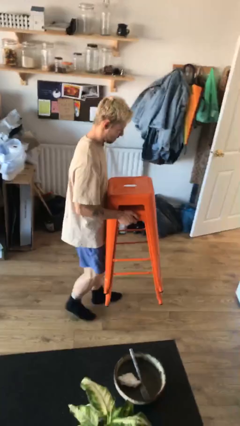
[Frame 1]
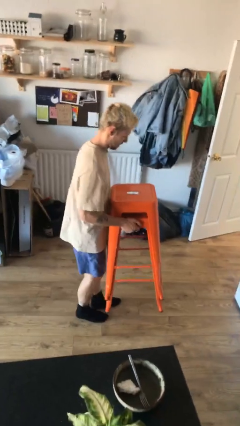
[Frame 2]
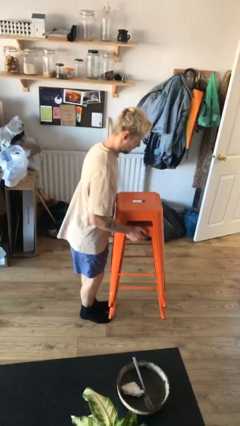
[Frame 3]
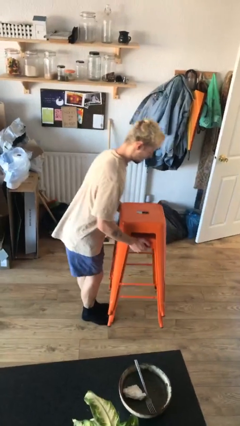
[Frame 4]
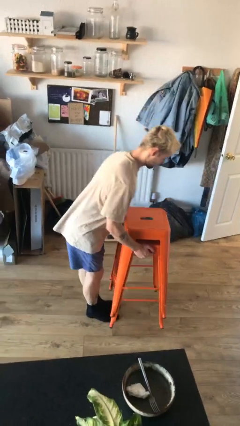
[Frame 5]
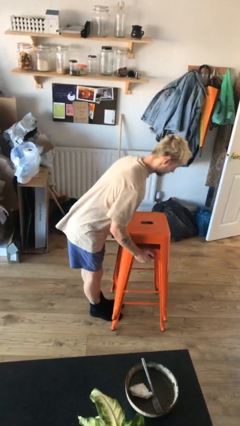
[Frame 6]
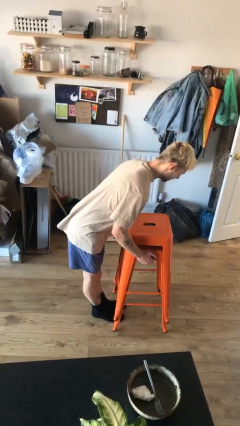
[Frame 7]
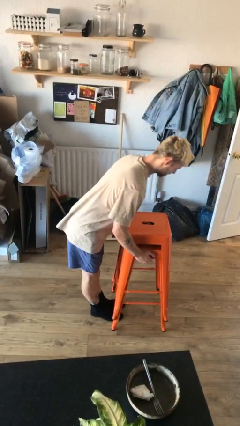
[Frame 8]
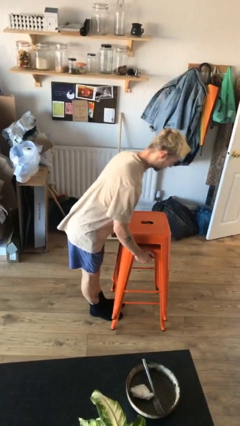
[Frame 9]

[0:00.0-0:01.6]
person puts down object on floor

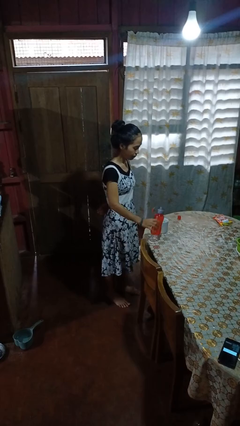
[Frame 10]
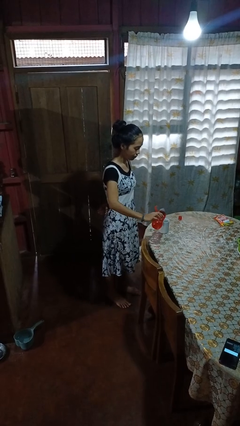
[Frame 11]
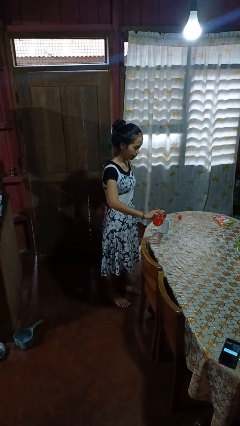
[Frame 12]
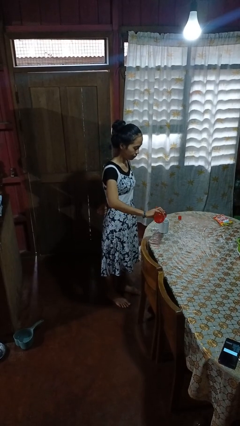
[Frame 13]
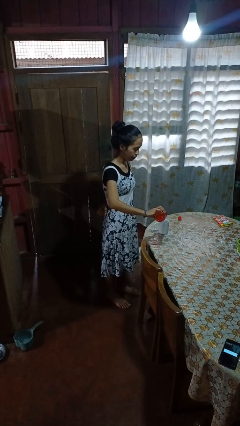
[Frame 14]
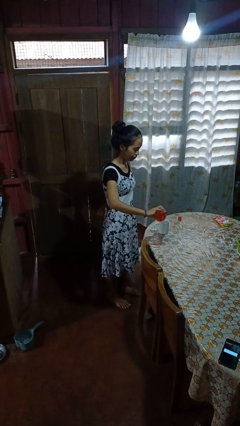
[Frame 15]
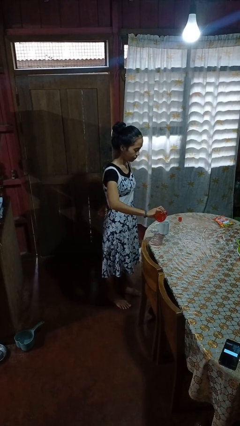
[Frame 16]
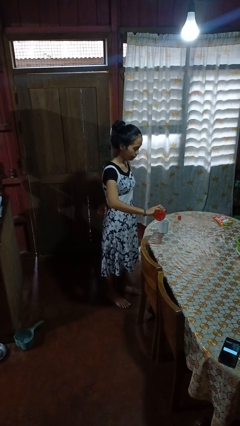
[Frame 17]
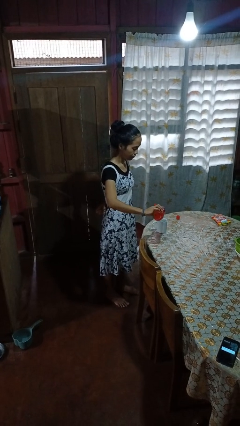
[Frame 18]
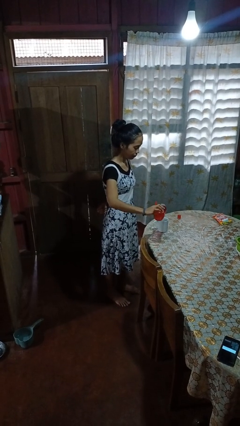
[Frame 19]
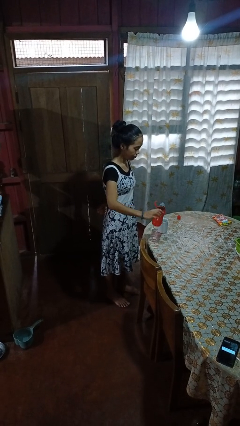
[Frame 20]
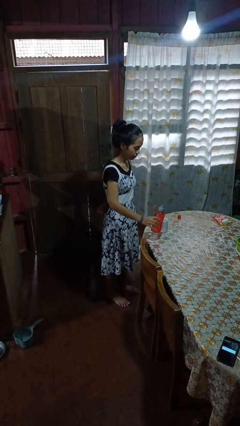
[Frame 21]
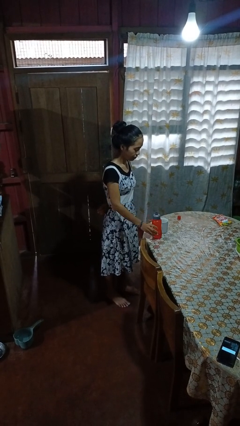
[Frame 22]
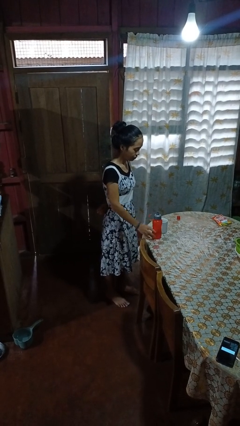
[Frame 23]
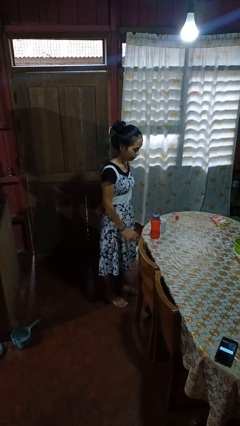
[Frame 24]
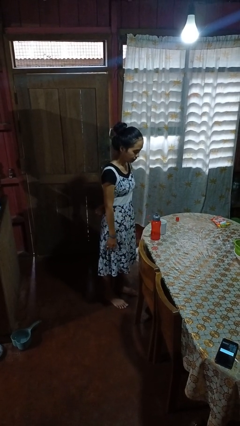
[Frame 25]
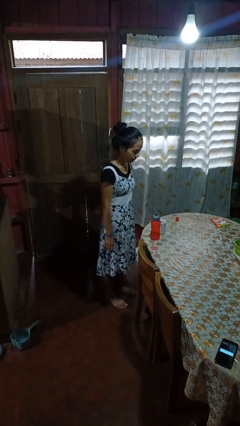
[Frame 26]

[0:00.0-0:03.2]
person pours liquid into cup

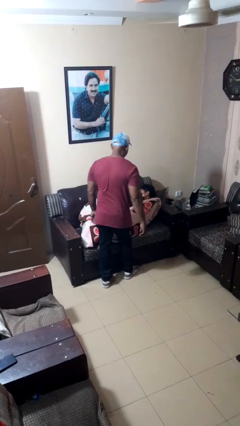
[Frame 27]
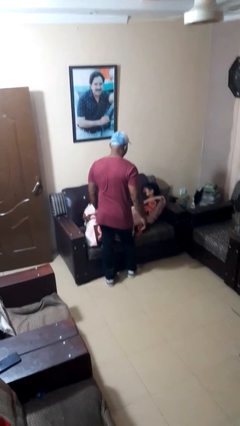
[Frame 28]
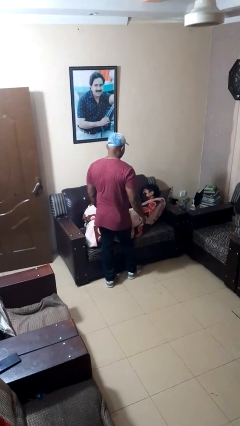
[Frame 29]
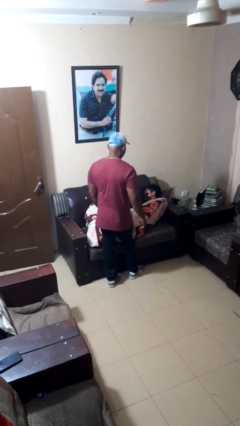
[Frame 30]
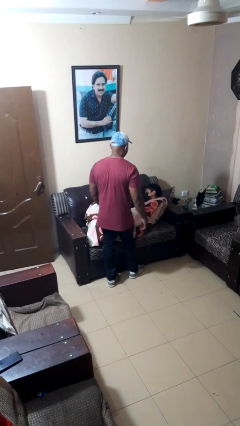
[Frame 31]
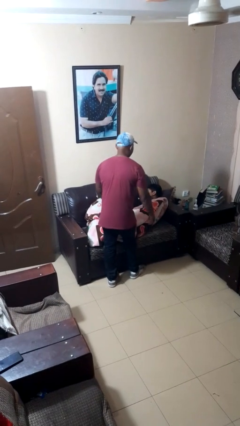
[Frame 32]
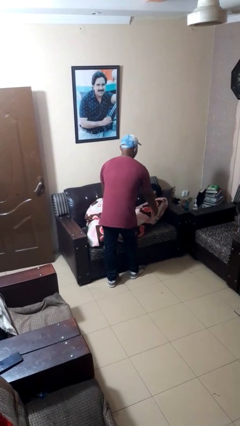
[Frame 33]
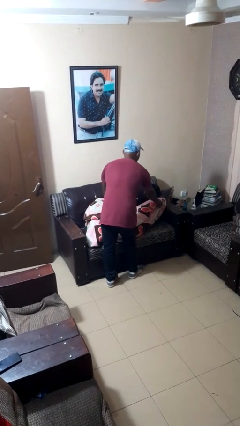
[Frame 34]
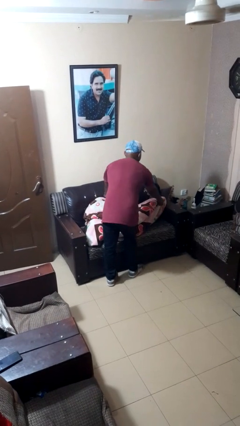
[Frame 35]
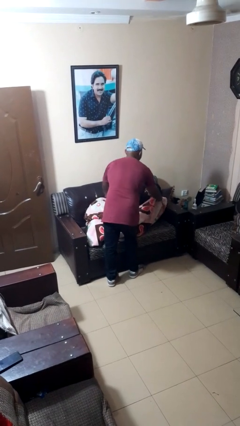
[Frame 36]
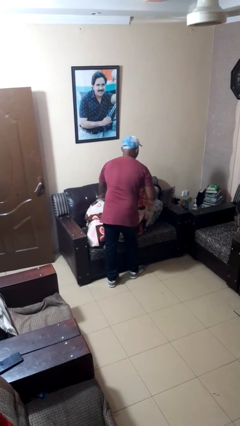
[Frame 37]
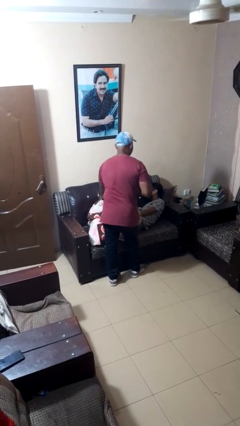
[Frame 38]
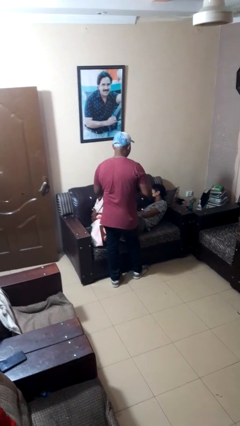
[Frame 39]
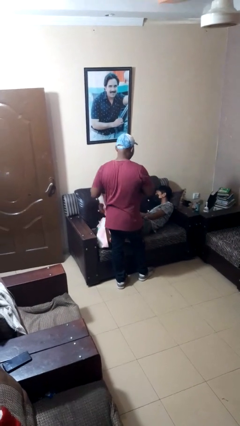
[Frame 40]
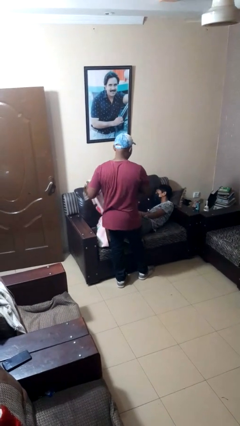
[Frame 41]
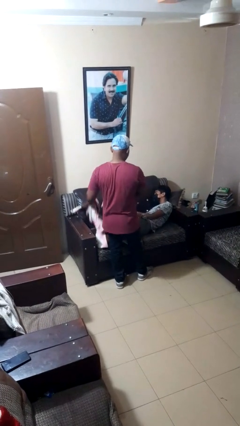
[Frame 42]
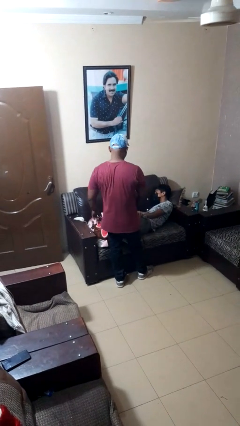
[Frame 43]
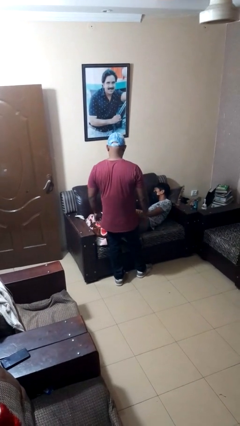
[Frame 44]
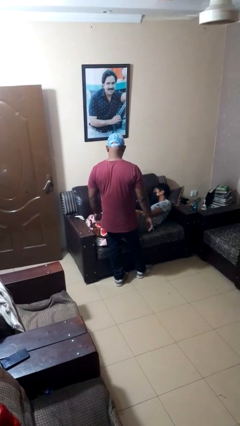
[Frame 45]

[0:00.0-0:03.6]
person uncovers friend with blanket

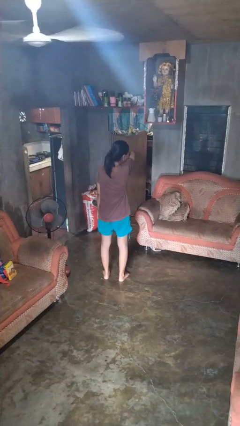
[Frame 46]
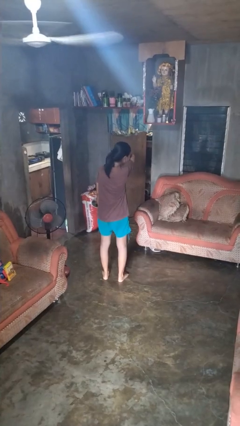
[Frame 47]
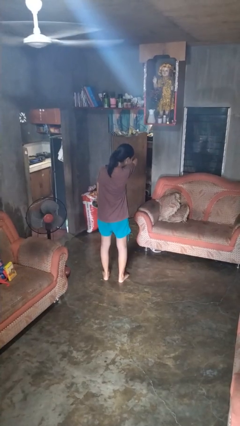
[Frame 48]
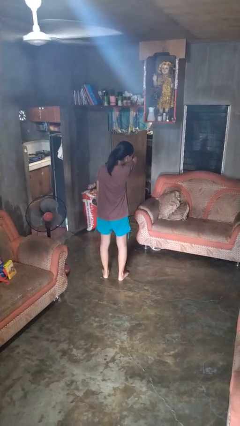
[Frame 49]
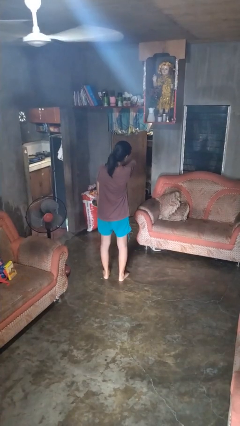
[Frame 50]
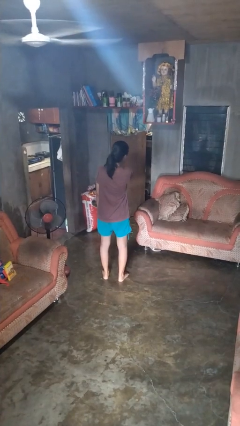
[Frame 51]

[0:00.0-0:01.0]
person sneezes into arm

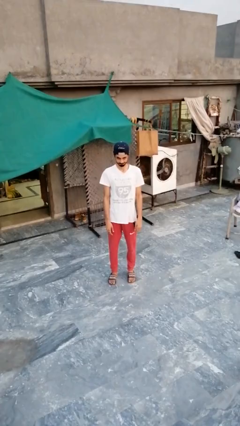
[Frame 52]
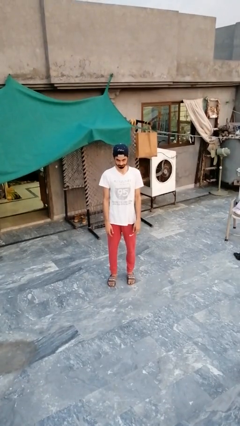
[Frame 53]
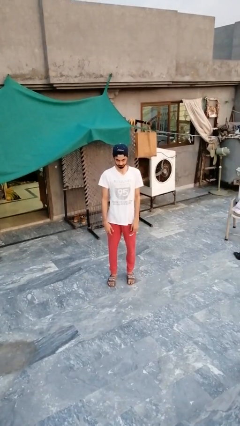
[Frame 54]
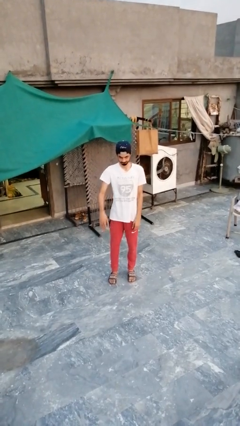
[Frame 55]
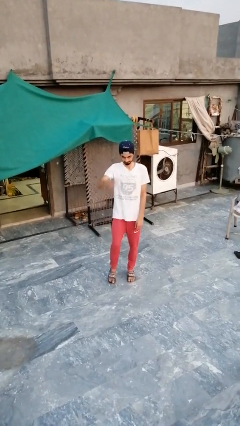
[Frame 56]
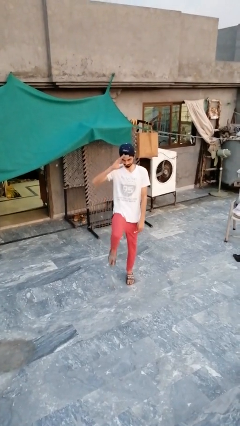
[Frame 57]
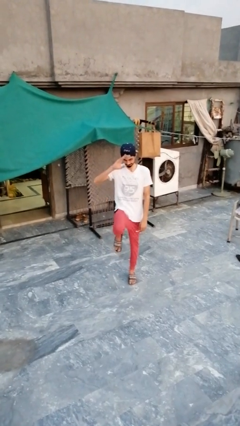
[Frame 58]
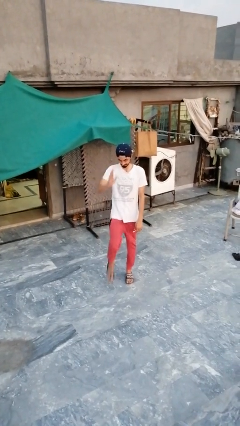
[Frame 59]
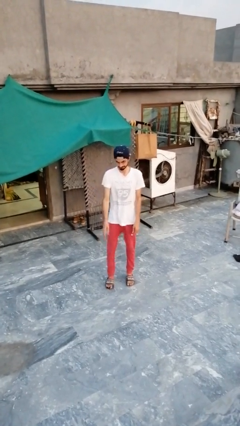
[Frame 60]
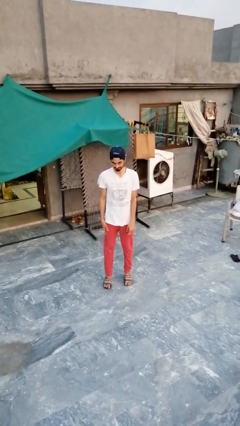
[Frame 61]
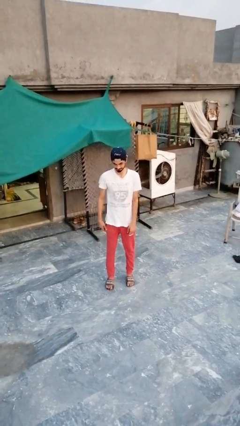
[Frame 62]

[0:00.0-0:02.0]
person salutes

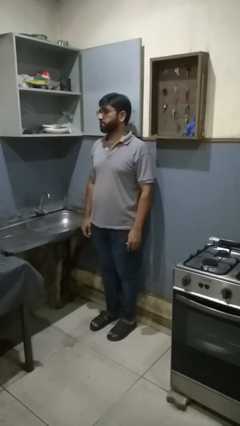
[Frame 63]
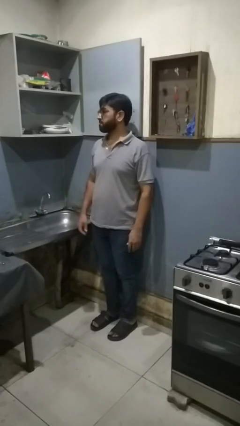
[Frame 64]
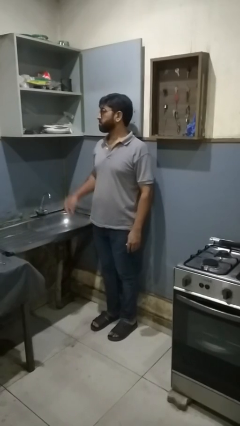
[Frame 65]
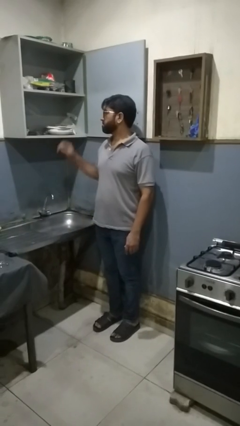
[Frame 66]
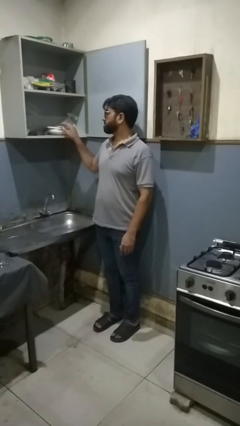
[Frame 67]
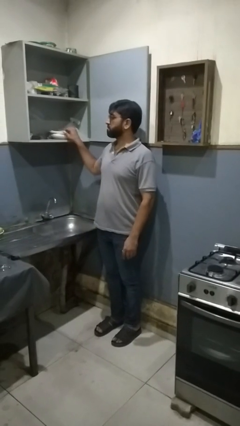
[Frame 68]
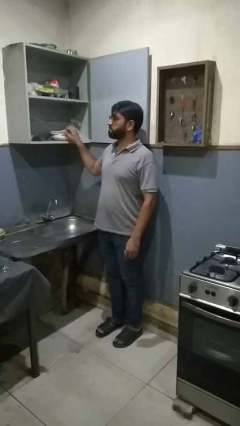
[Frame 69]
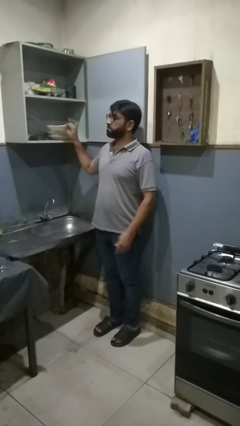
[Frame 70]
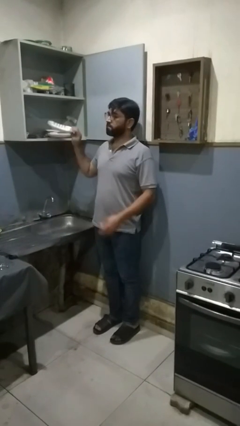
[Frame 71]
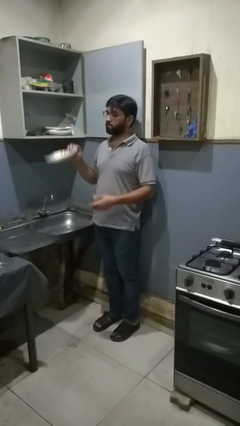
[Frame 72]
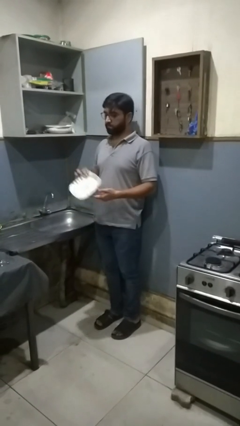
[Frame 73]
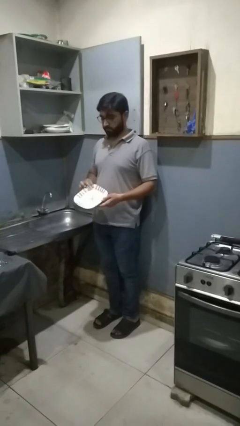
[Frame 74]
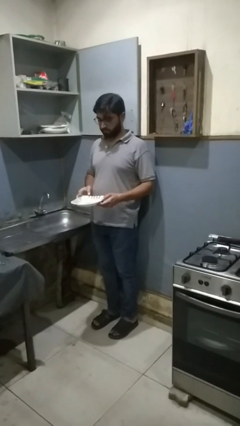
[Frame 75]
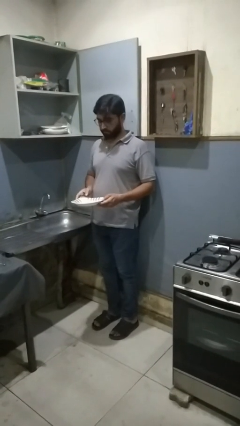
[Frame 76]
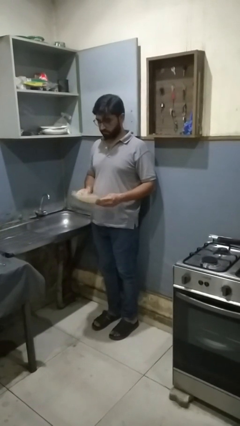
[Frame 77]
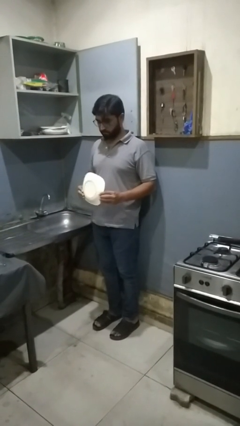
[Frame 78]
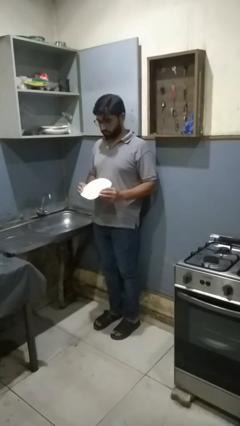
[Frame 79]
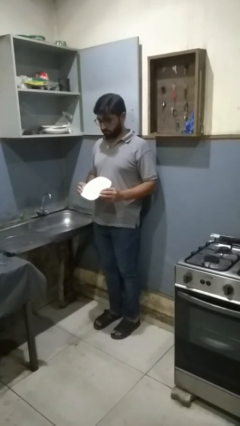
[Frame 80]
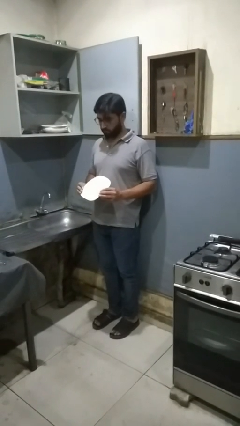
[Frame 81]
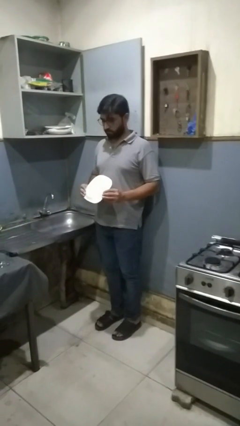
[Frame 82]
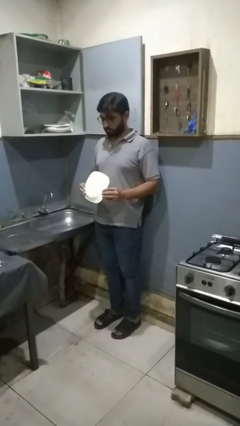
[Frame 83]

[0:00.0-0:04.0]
person takes object from kitchen drawer

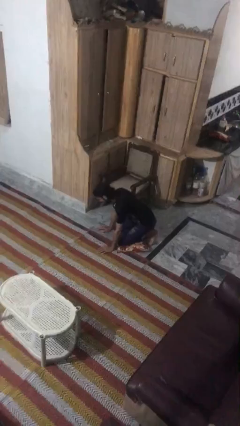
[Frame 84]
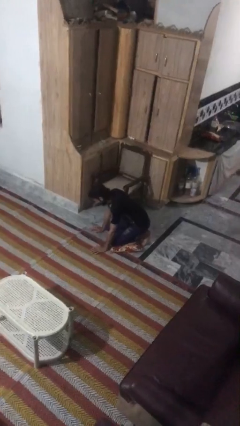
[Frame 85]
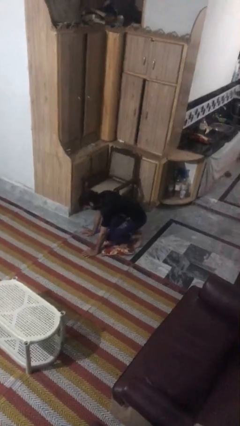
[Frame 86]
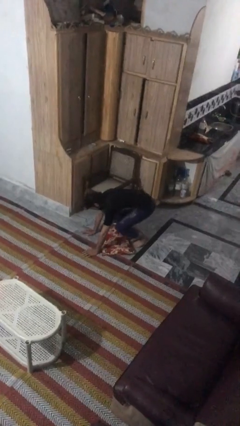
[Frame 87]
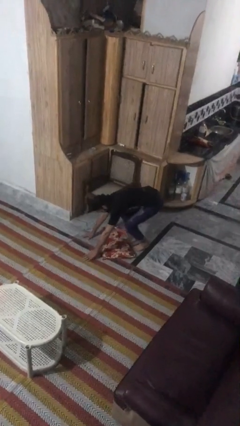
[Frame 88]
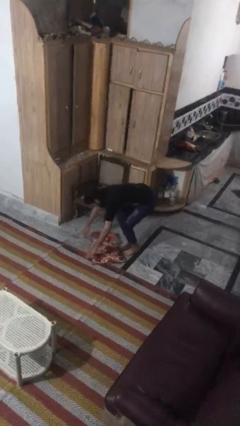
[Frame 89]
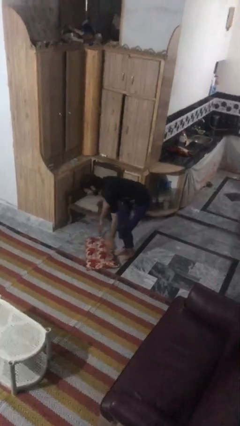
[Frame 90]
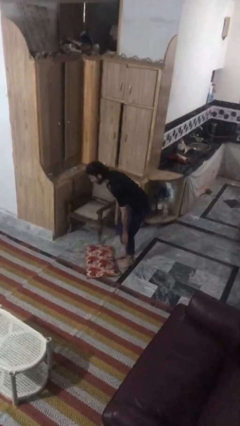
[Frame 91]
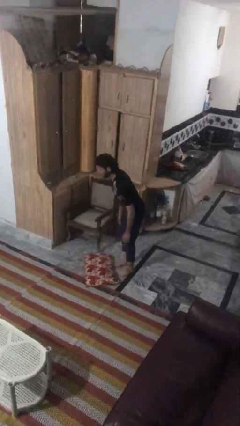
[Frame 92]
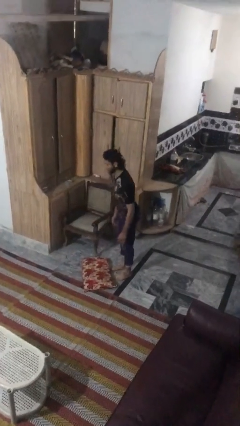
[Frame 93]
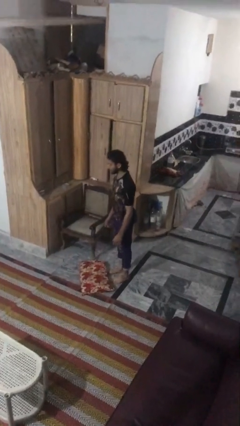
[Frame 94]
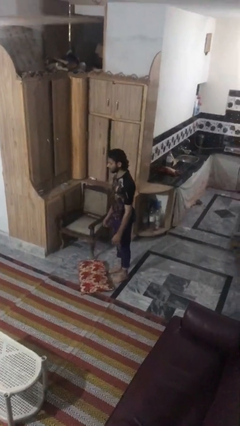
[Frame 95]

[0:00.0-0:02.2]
person stands up from floor
